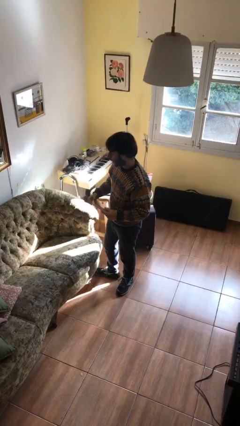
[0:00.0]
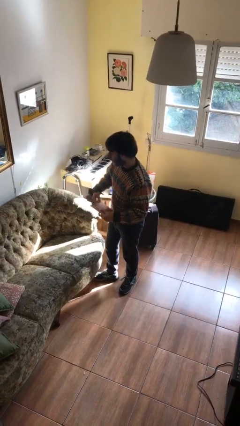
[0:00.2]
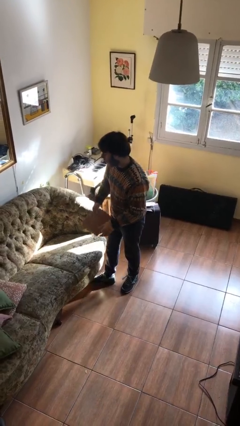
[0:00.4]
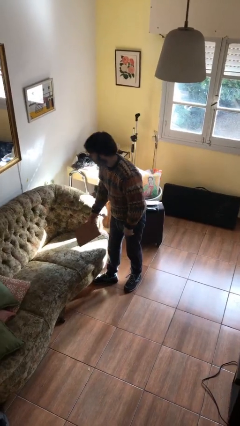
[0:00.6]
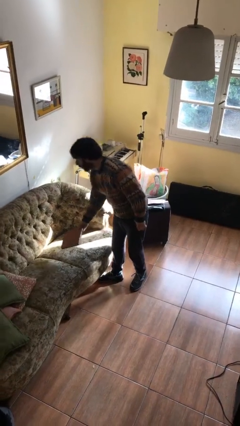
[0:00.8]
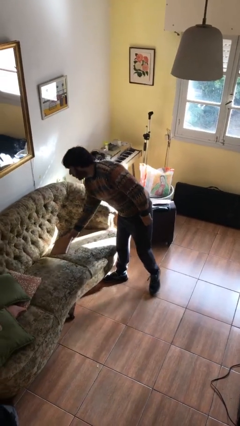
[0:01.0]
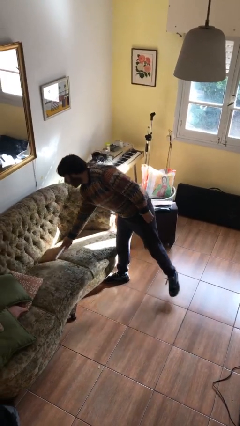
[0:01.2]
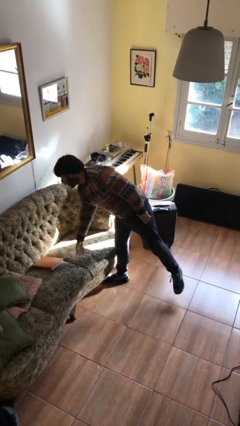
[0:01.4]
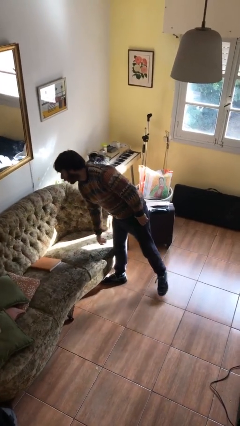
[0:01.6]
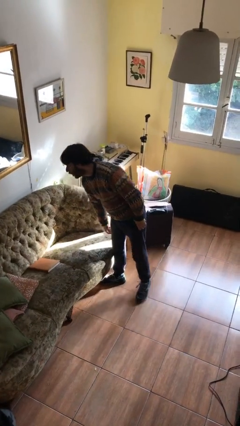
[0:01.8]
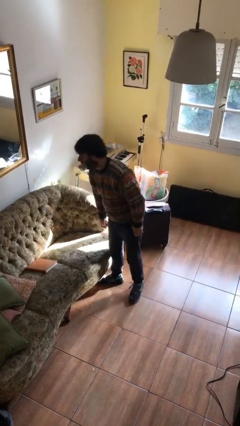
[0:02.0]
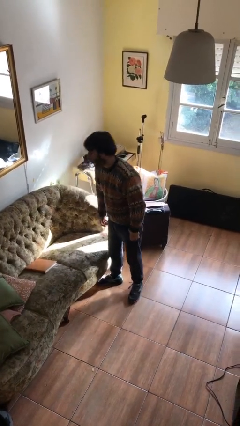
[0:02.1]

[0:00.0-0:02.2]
person puts down object on couch

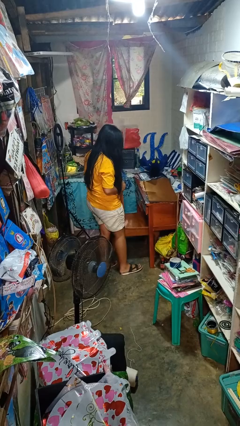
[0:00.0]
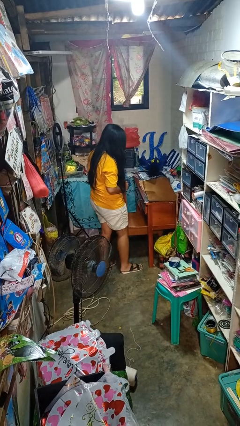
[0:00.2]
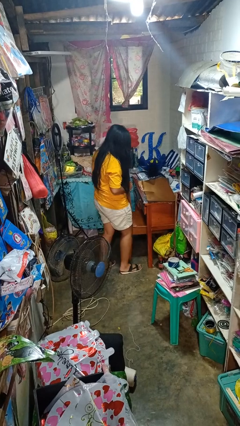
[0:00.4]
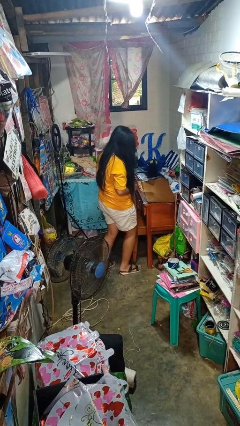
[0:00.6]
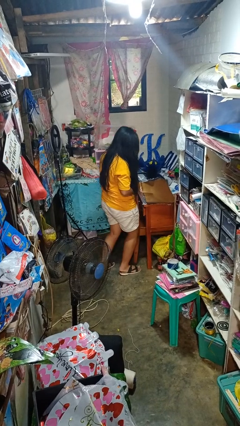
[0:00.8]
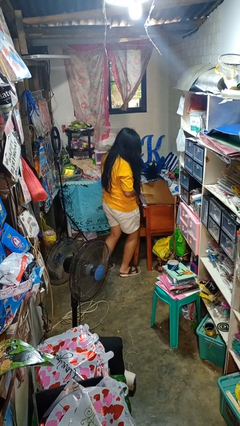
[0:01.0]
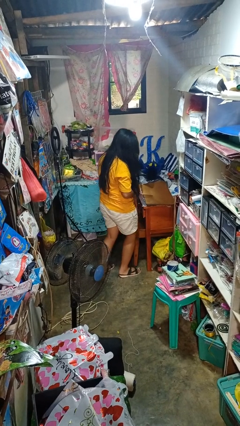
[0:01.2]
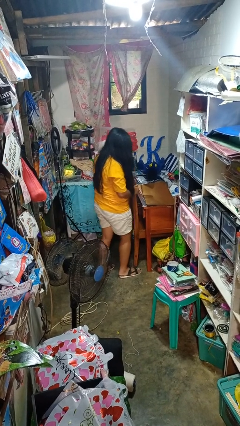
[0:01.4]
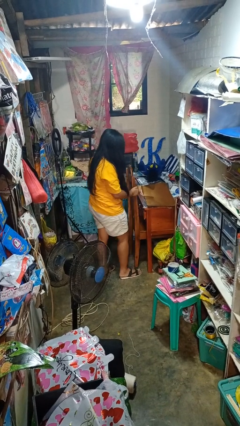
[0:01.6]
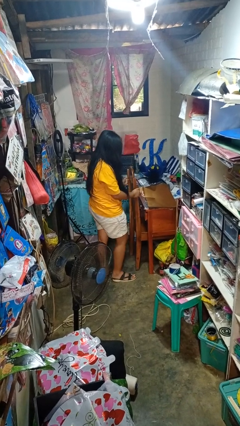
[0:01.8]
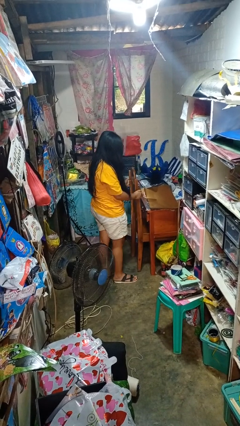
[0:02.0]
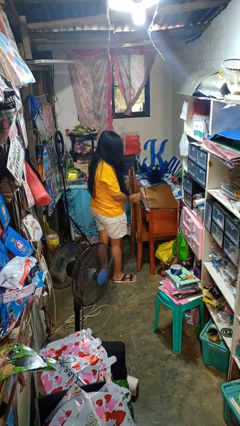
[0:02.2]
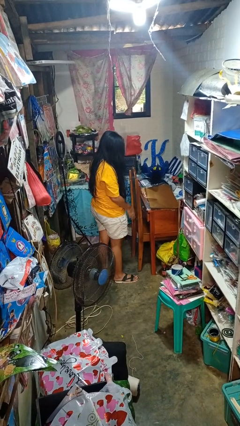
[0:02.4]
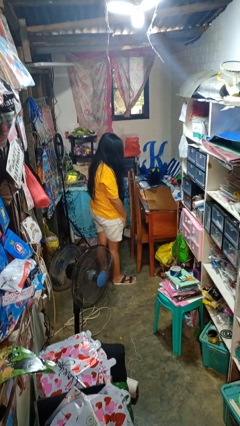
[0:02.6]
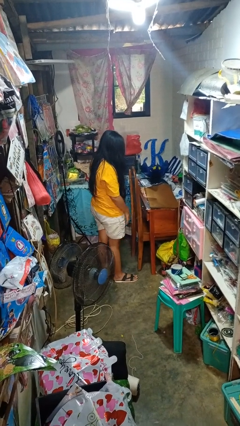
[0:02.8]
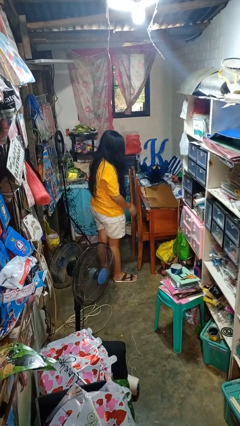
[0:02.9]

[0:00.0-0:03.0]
person pushes in chair

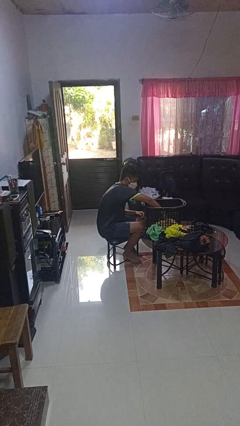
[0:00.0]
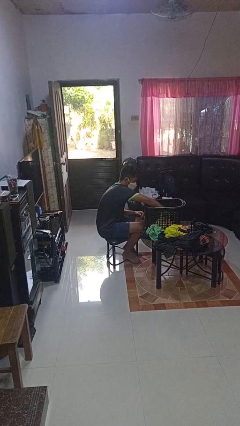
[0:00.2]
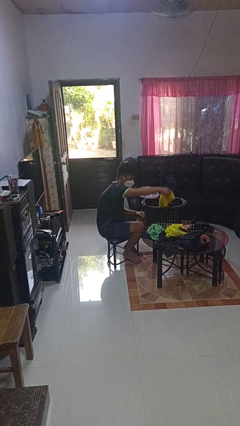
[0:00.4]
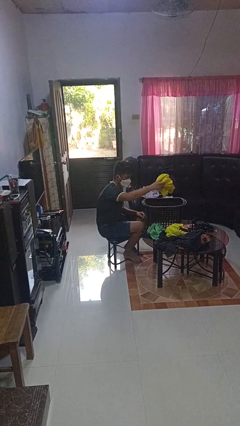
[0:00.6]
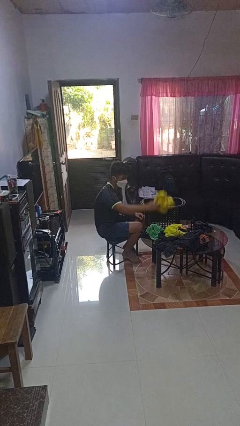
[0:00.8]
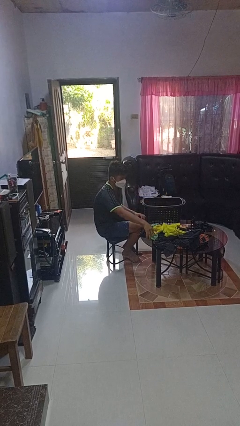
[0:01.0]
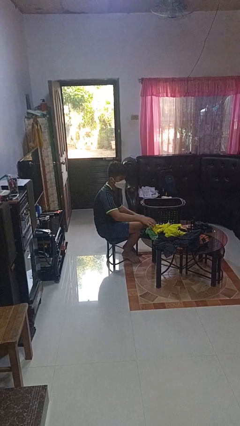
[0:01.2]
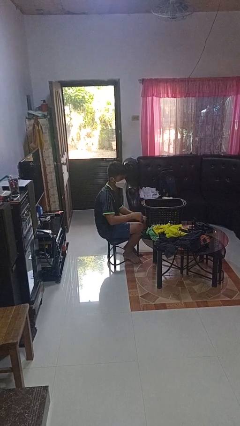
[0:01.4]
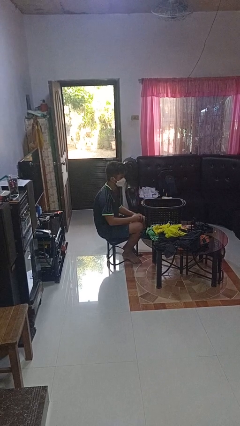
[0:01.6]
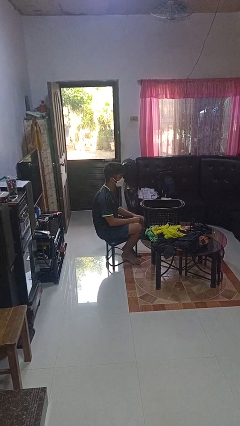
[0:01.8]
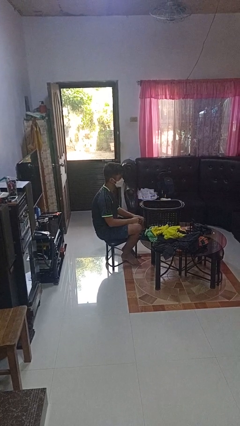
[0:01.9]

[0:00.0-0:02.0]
person takes object from basket

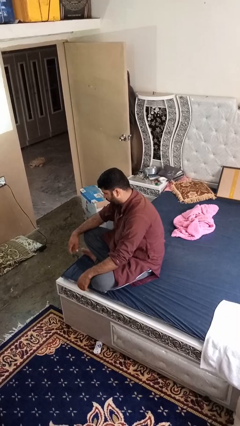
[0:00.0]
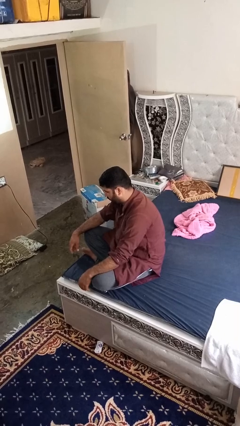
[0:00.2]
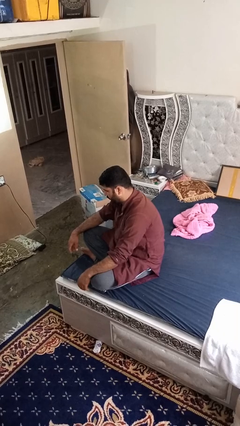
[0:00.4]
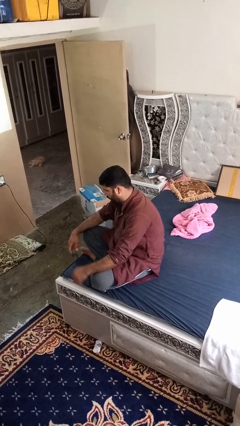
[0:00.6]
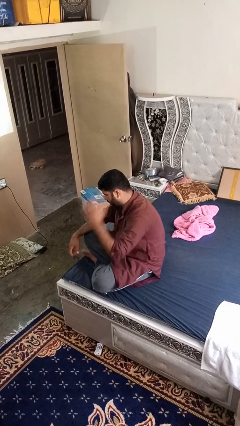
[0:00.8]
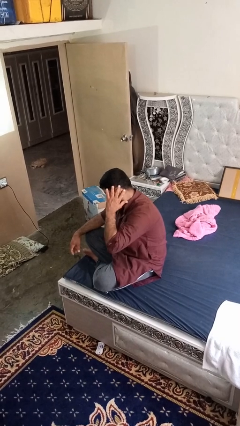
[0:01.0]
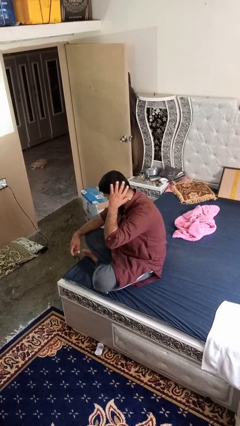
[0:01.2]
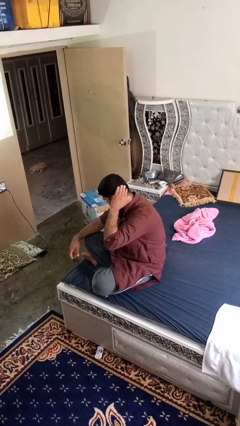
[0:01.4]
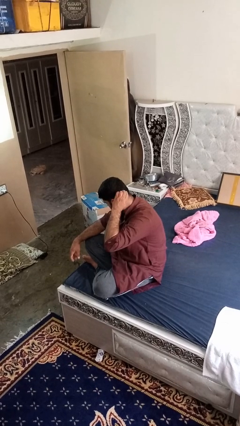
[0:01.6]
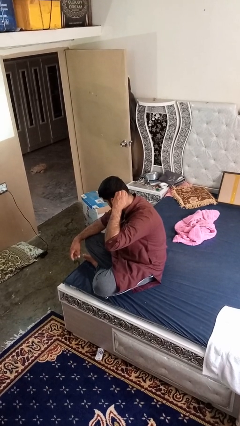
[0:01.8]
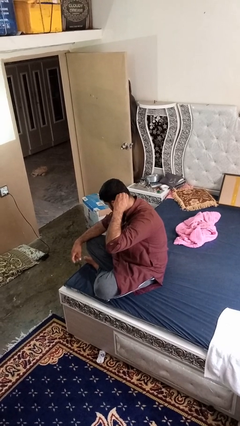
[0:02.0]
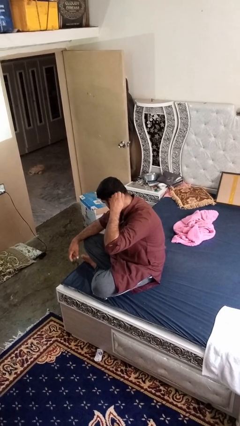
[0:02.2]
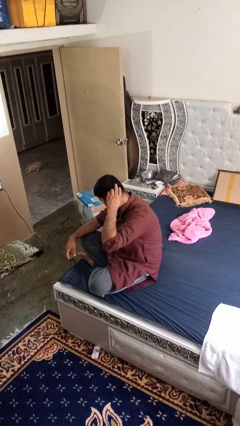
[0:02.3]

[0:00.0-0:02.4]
person strokes hair

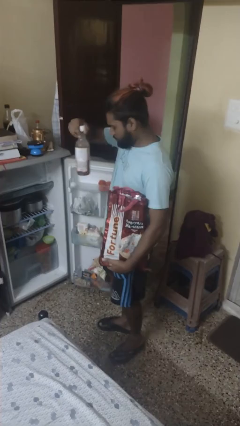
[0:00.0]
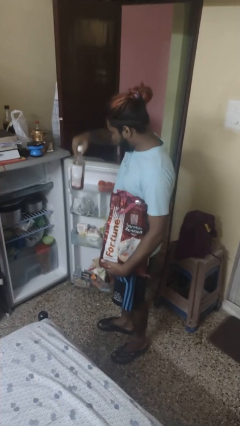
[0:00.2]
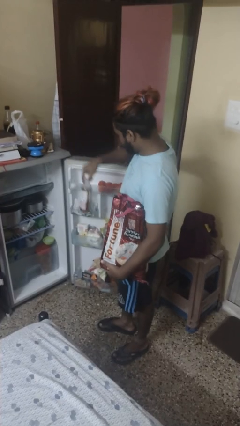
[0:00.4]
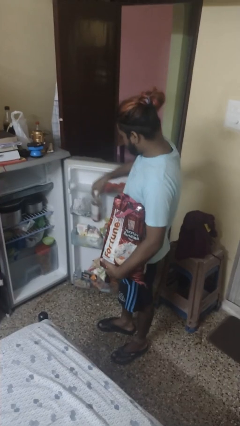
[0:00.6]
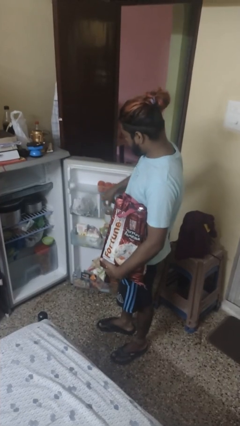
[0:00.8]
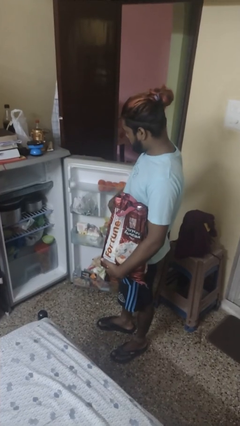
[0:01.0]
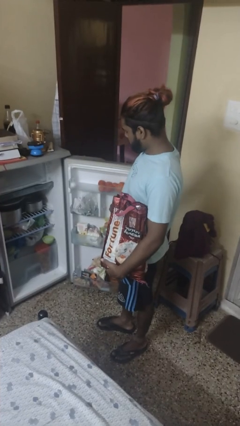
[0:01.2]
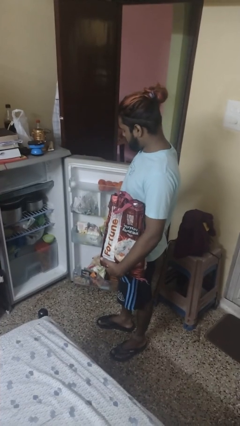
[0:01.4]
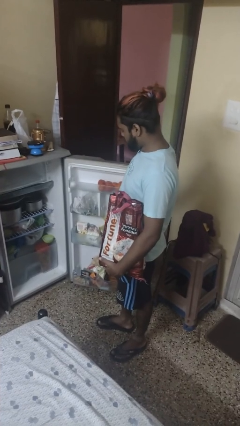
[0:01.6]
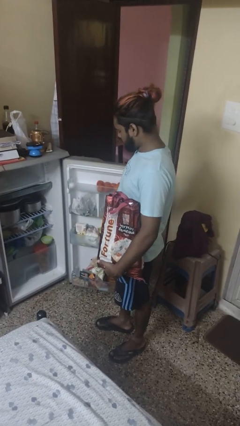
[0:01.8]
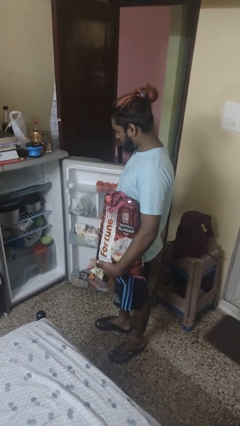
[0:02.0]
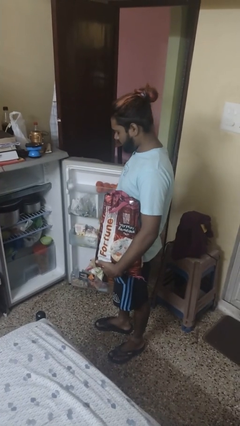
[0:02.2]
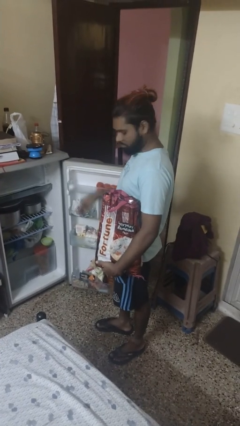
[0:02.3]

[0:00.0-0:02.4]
person loads groceries into refrigerator

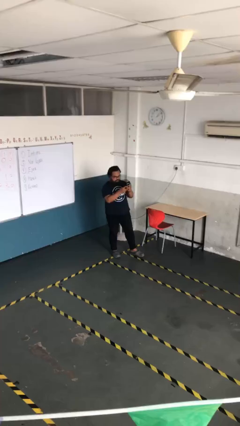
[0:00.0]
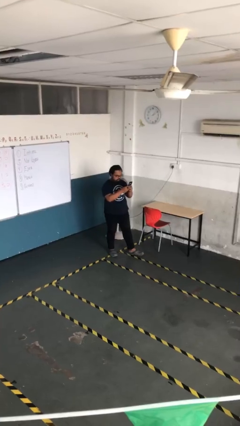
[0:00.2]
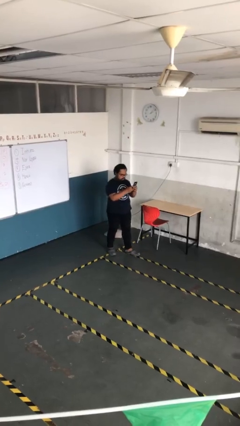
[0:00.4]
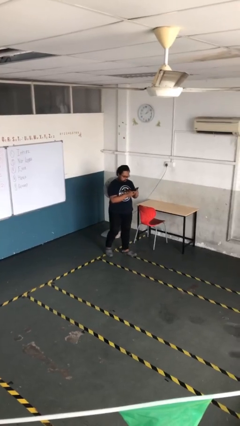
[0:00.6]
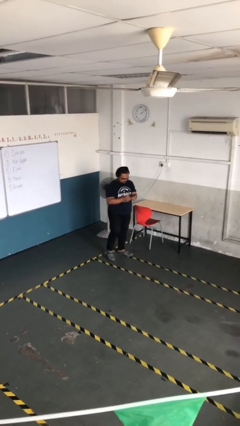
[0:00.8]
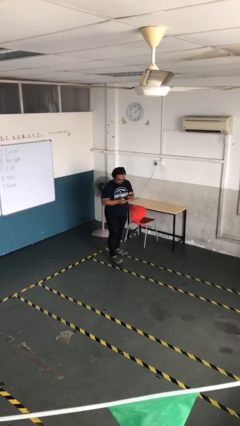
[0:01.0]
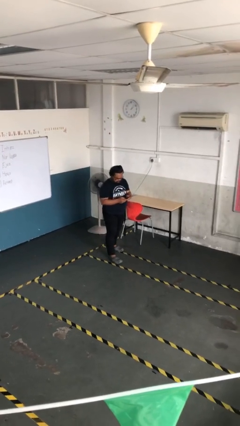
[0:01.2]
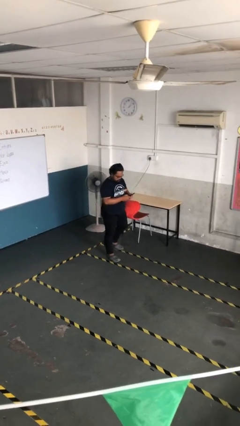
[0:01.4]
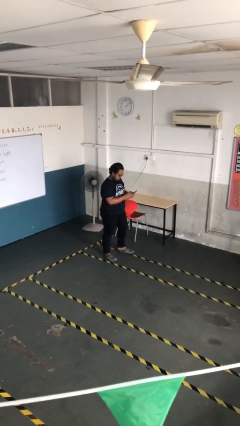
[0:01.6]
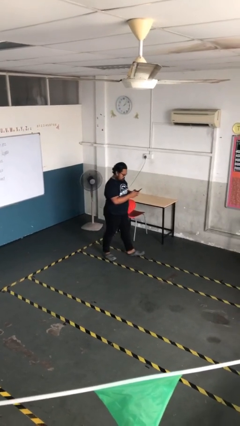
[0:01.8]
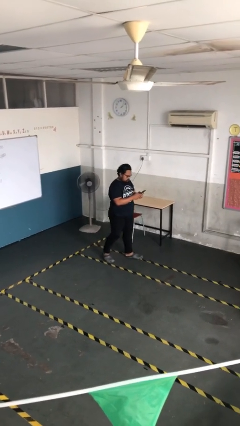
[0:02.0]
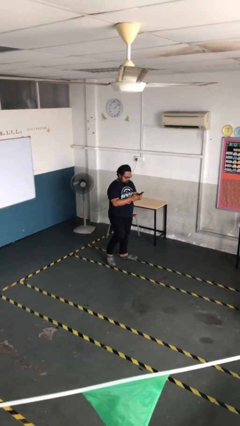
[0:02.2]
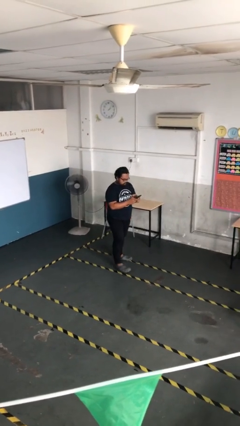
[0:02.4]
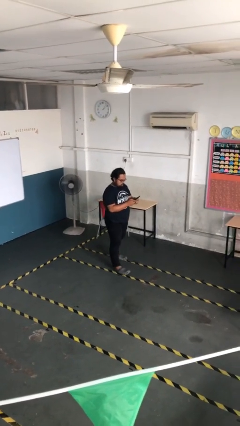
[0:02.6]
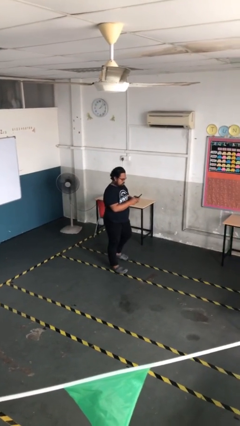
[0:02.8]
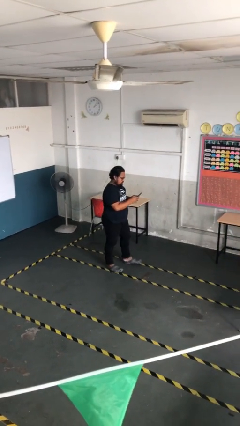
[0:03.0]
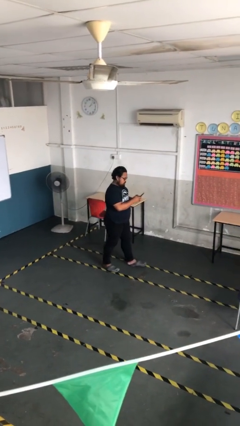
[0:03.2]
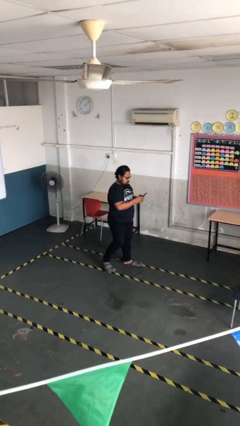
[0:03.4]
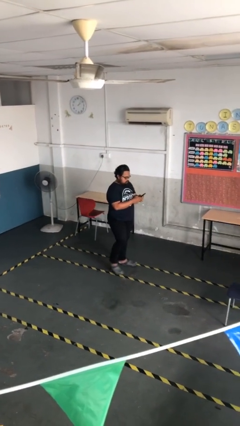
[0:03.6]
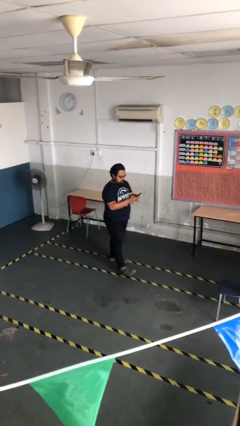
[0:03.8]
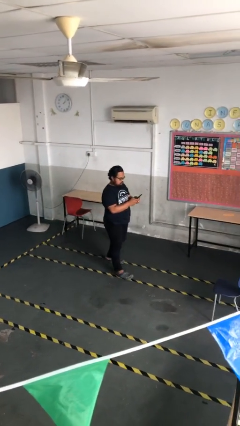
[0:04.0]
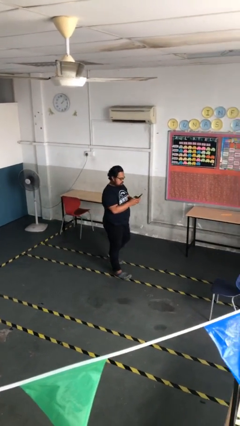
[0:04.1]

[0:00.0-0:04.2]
person texts on phone

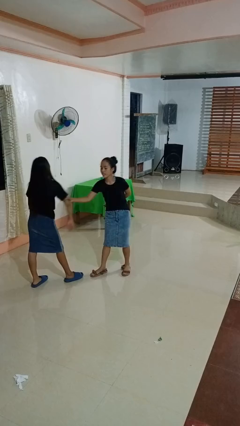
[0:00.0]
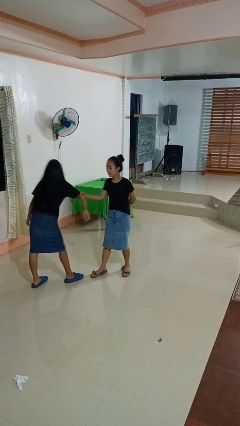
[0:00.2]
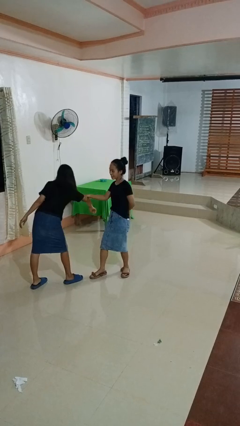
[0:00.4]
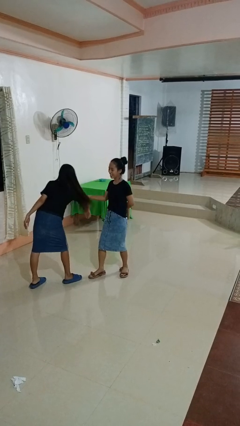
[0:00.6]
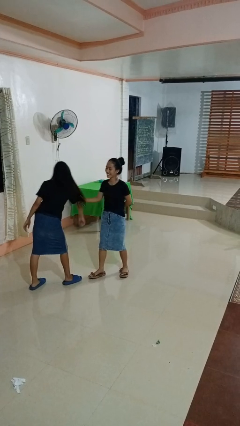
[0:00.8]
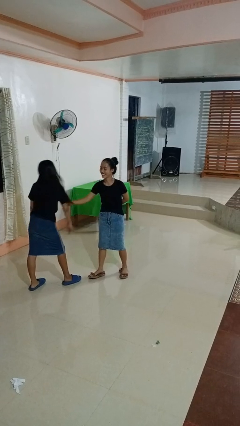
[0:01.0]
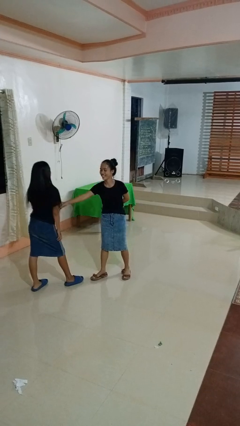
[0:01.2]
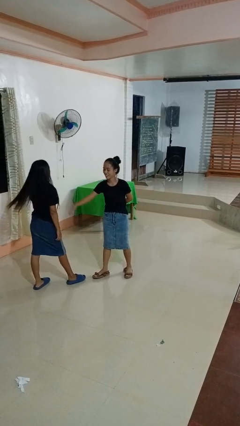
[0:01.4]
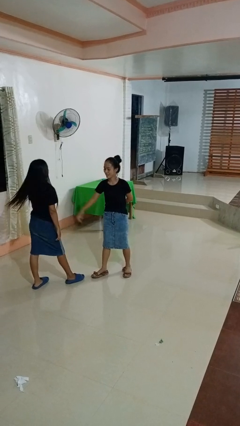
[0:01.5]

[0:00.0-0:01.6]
person grabs person by bicep
